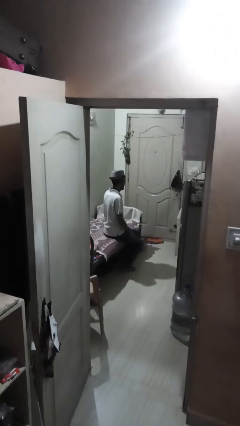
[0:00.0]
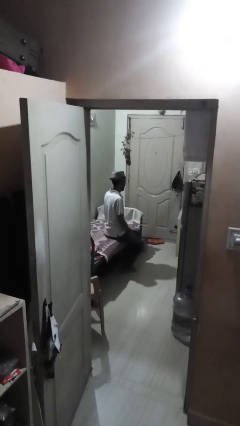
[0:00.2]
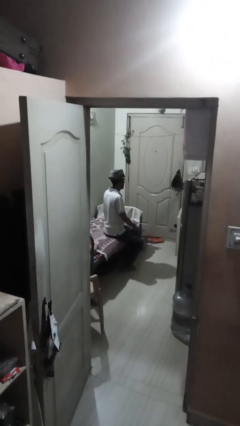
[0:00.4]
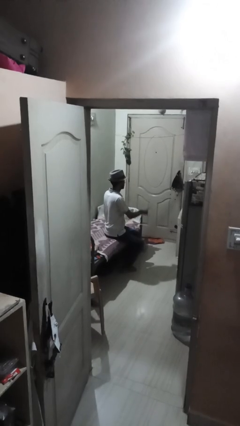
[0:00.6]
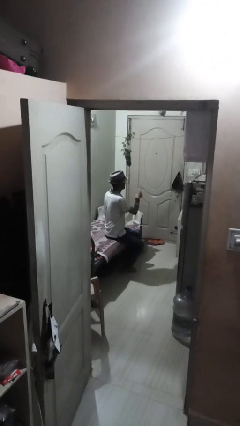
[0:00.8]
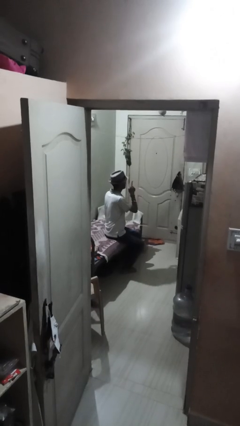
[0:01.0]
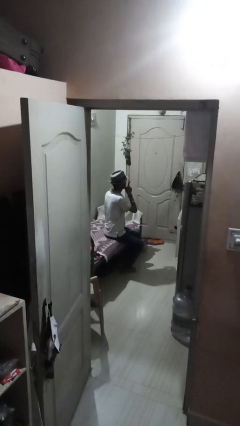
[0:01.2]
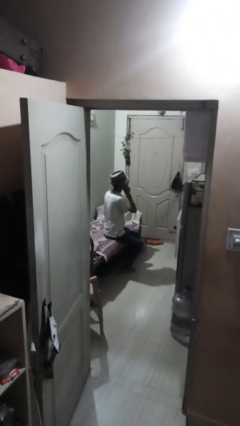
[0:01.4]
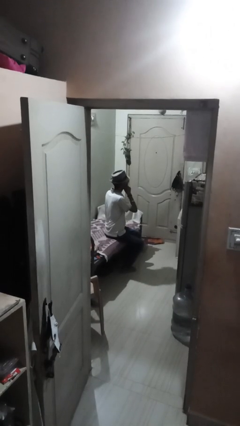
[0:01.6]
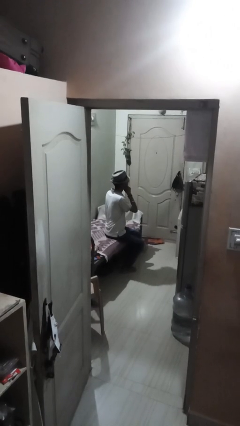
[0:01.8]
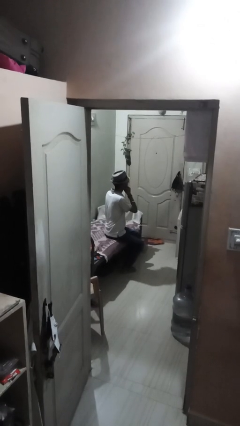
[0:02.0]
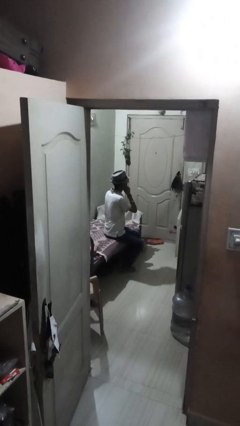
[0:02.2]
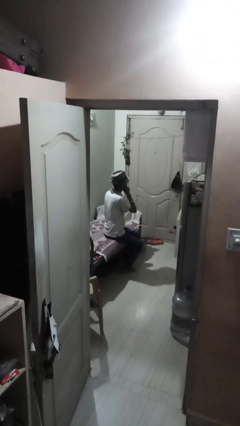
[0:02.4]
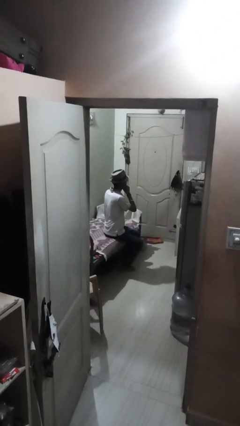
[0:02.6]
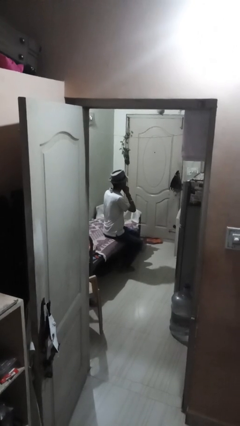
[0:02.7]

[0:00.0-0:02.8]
person gestures be quiet

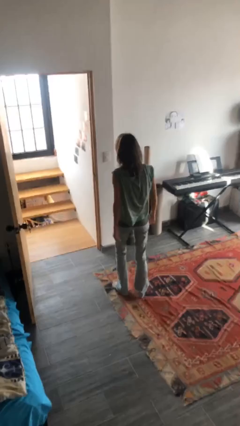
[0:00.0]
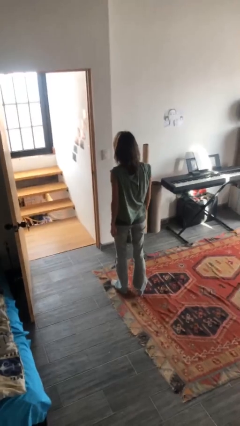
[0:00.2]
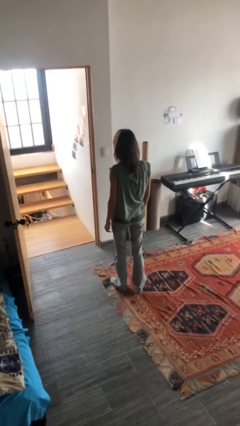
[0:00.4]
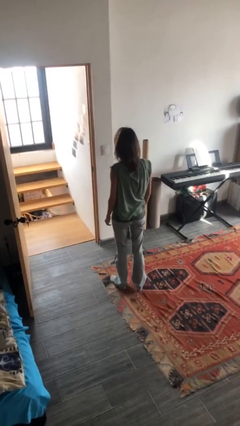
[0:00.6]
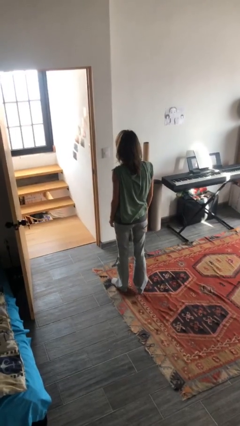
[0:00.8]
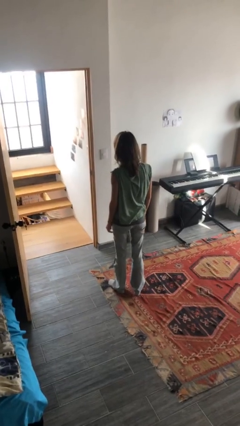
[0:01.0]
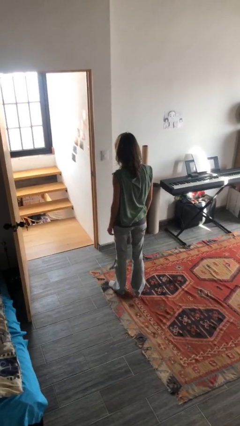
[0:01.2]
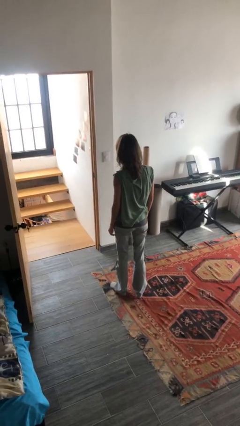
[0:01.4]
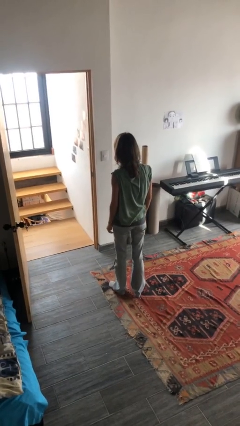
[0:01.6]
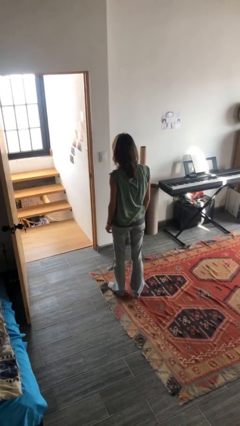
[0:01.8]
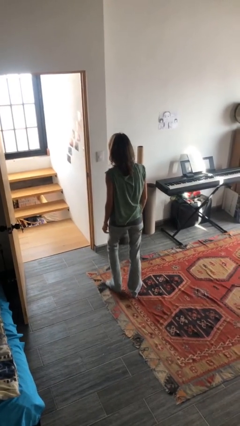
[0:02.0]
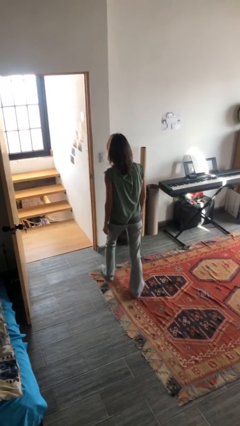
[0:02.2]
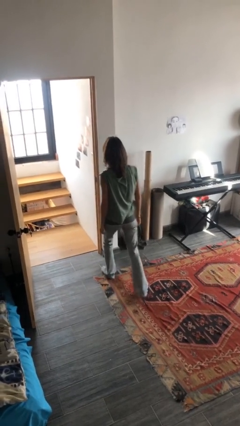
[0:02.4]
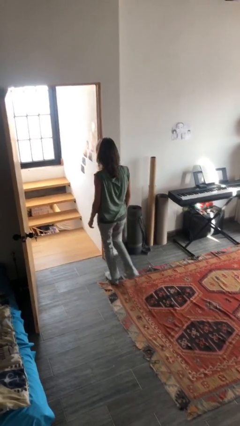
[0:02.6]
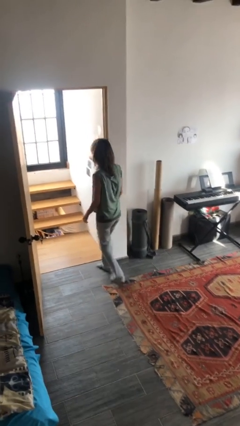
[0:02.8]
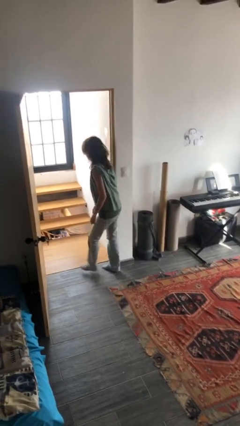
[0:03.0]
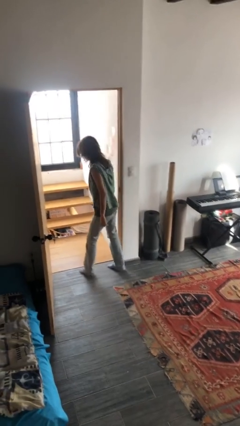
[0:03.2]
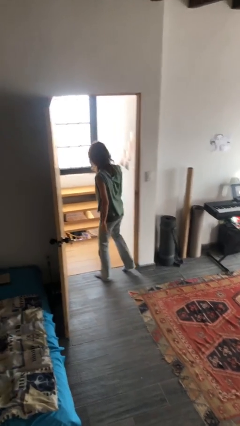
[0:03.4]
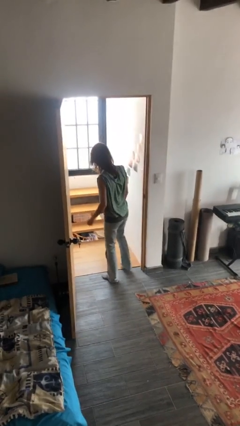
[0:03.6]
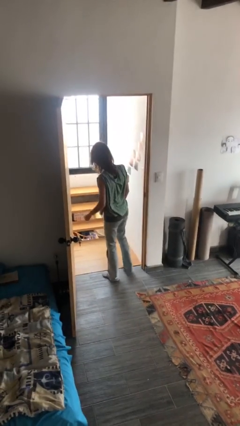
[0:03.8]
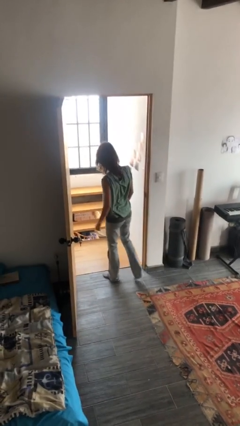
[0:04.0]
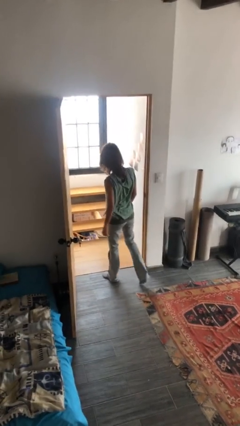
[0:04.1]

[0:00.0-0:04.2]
person bumps into wall

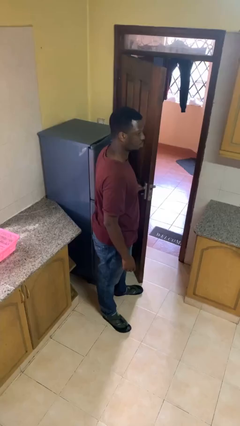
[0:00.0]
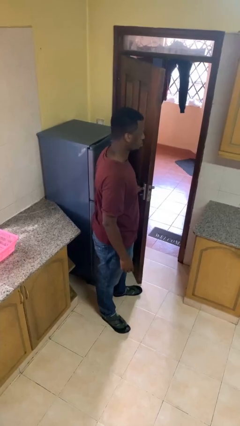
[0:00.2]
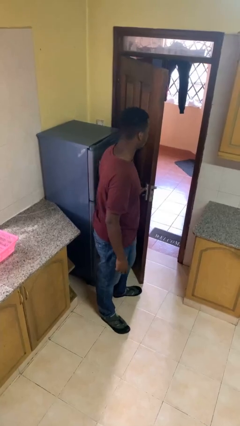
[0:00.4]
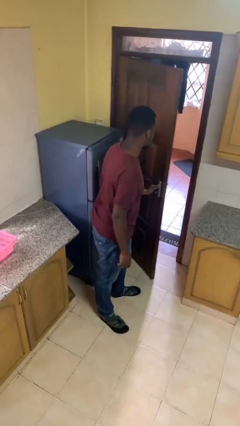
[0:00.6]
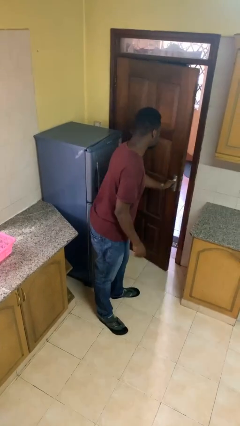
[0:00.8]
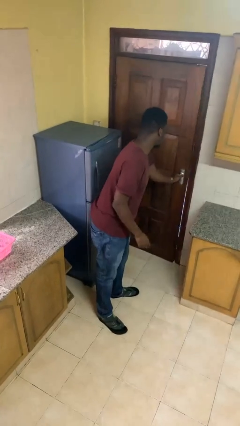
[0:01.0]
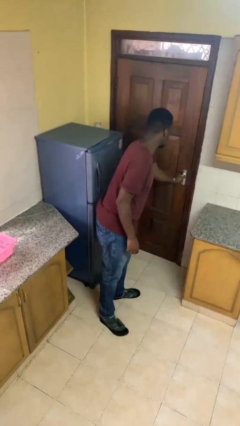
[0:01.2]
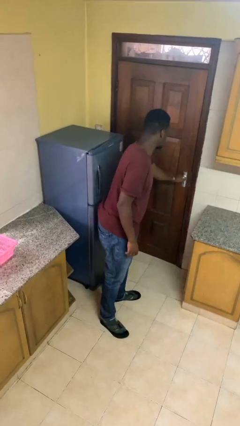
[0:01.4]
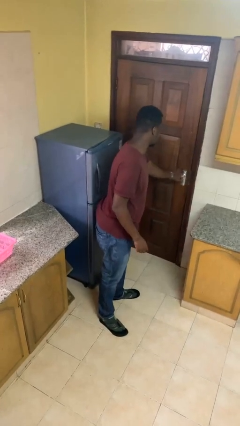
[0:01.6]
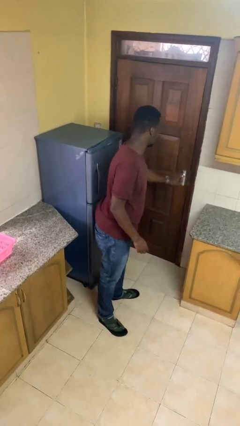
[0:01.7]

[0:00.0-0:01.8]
person closes facility door

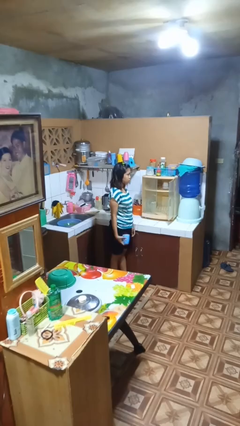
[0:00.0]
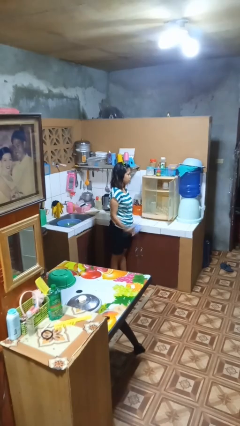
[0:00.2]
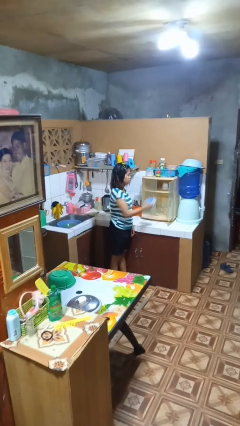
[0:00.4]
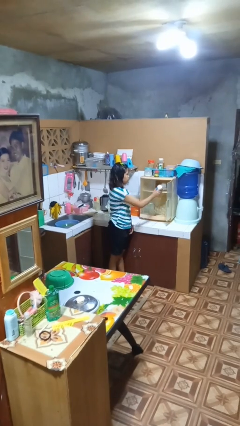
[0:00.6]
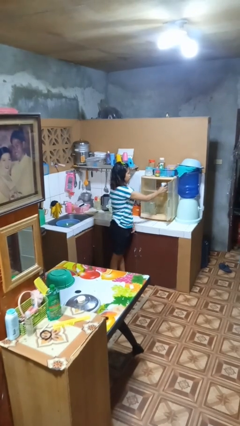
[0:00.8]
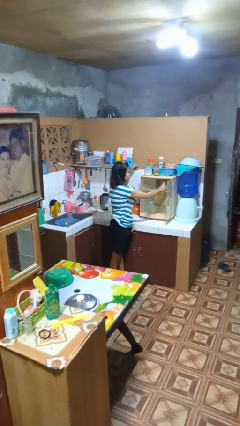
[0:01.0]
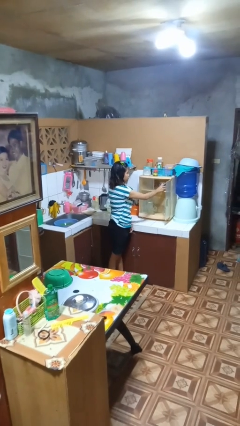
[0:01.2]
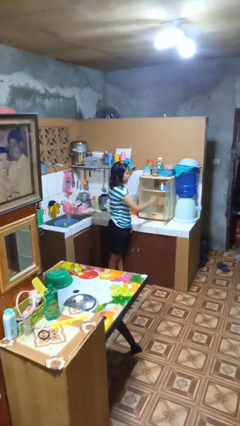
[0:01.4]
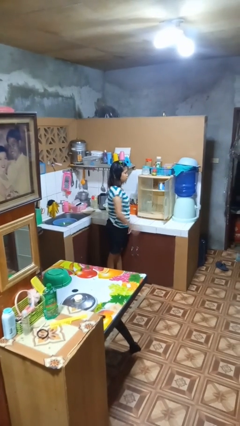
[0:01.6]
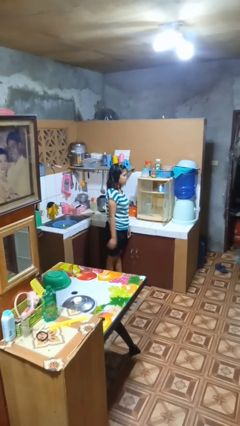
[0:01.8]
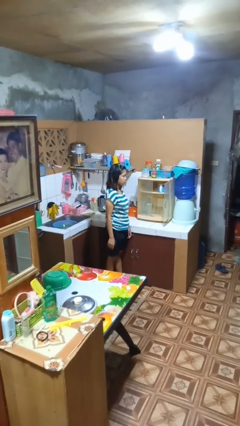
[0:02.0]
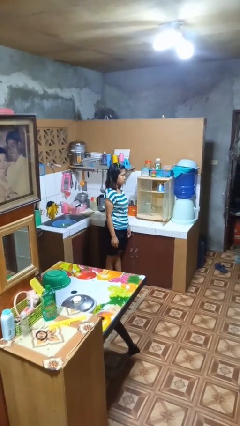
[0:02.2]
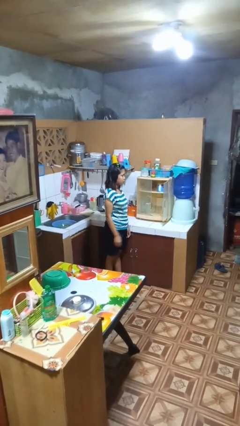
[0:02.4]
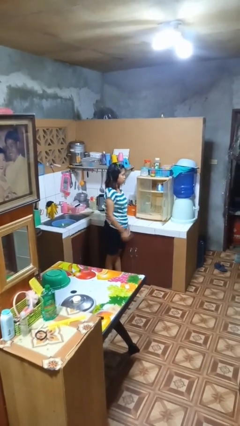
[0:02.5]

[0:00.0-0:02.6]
person puts object in cabinet

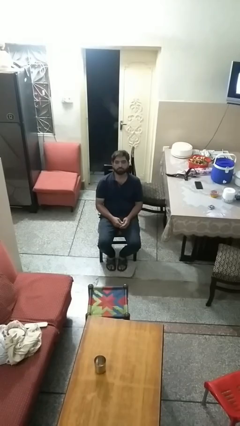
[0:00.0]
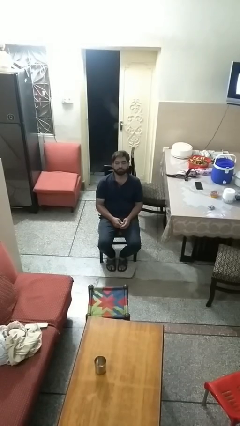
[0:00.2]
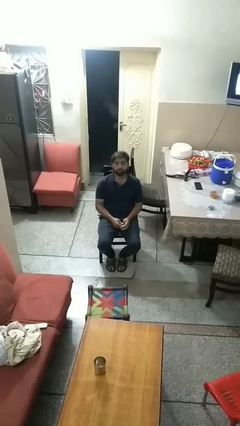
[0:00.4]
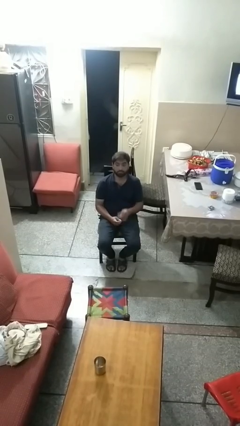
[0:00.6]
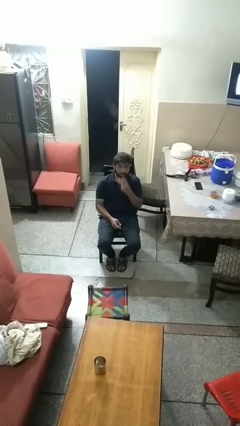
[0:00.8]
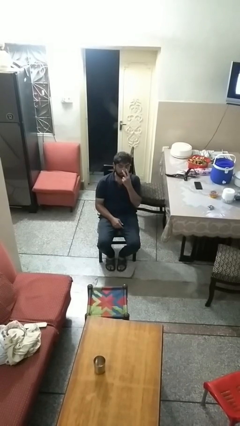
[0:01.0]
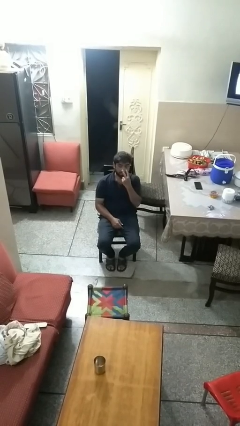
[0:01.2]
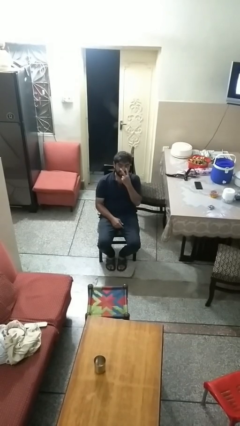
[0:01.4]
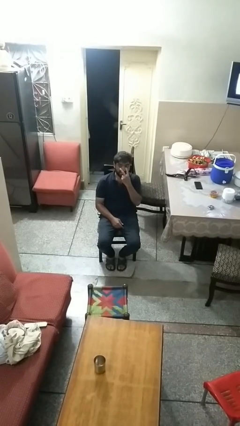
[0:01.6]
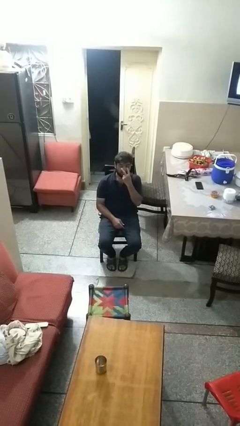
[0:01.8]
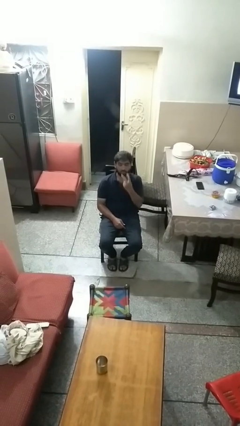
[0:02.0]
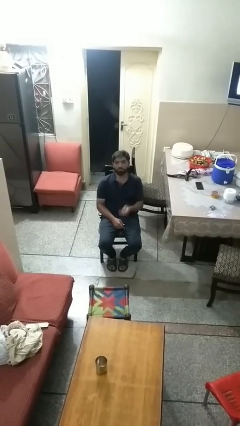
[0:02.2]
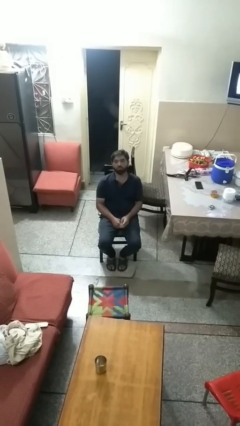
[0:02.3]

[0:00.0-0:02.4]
person gestures watch closely

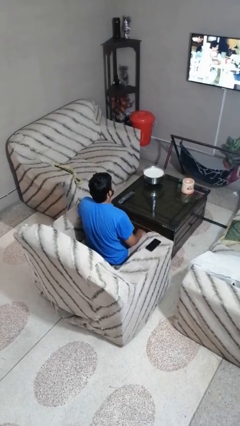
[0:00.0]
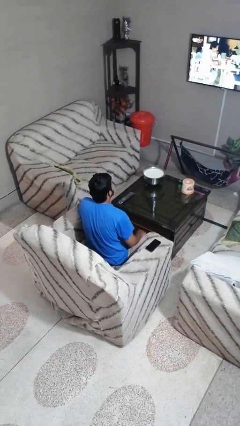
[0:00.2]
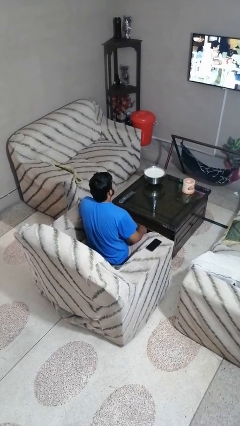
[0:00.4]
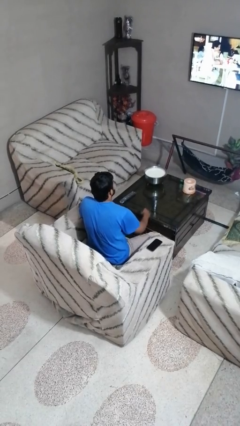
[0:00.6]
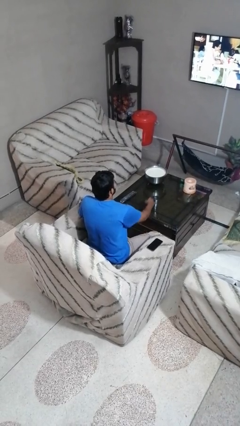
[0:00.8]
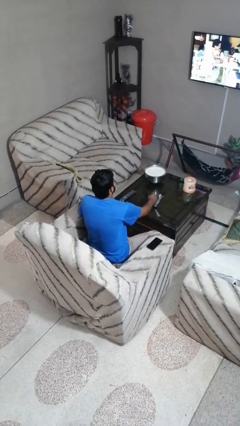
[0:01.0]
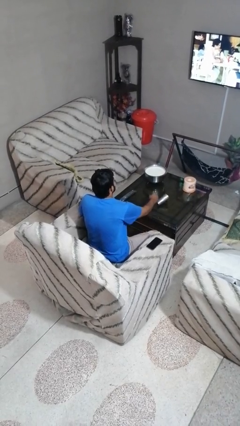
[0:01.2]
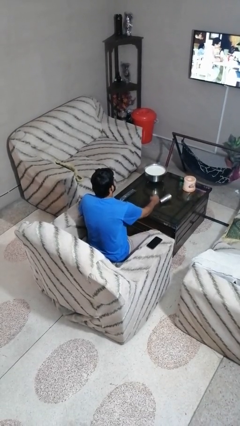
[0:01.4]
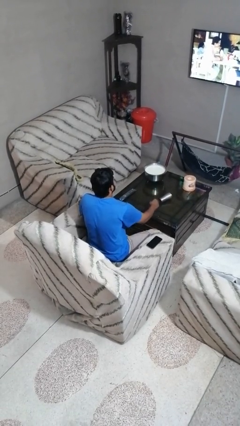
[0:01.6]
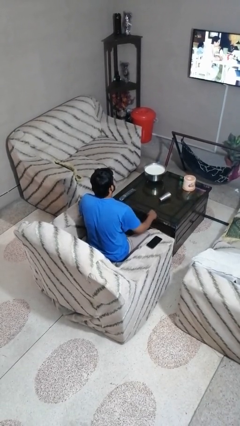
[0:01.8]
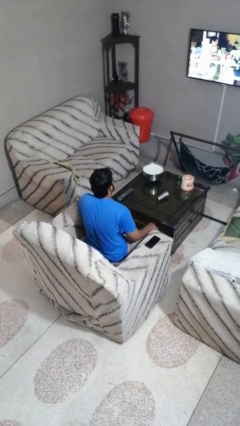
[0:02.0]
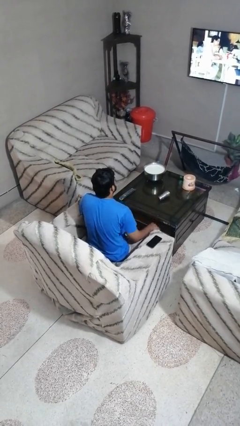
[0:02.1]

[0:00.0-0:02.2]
person knocks over glass

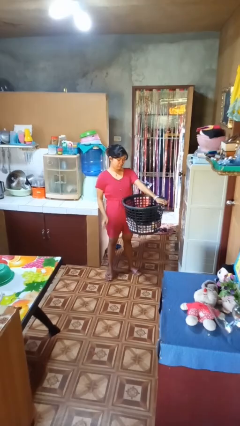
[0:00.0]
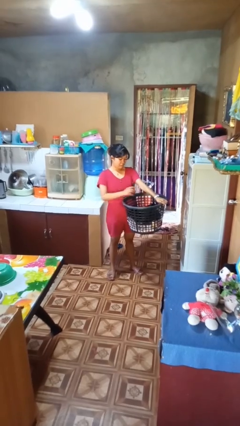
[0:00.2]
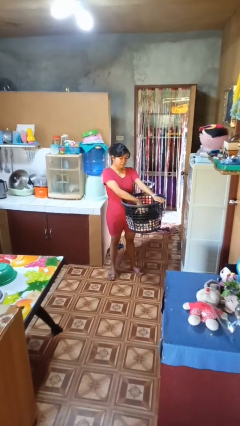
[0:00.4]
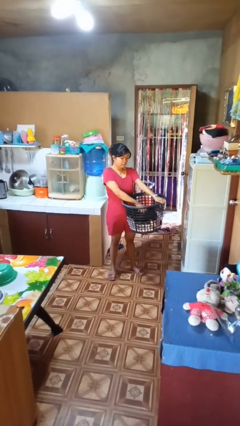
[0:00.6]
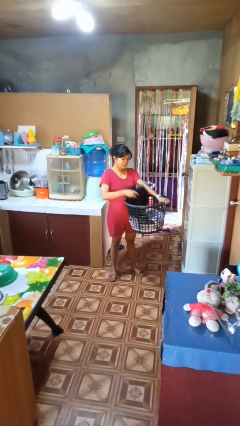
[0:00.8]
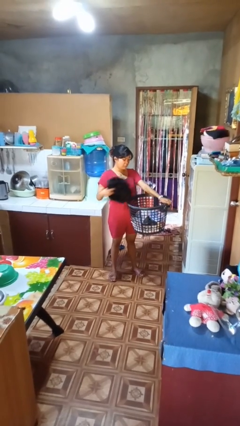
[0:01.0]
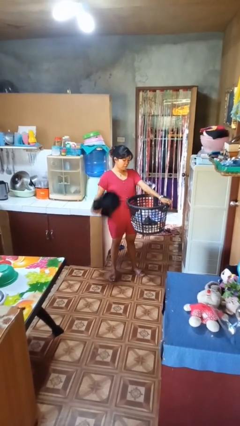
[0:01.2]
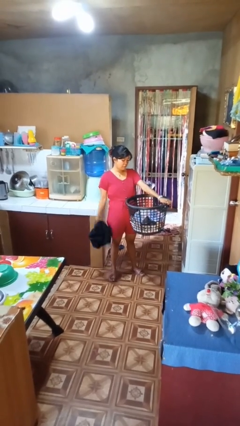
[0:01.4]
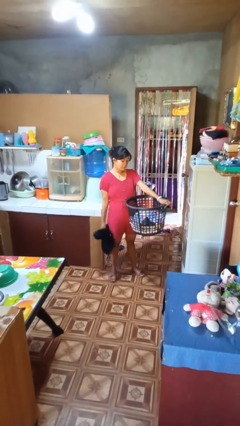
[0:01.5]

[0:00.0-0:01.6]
person takes object from basket
